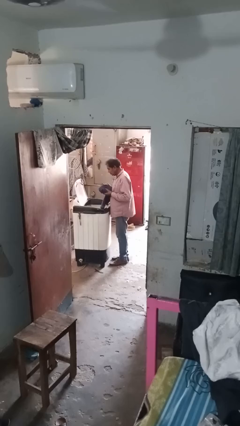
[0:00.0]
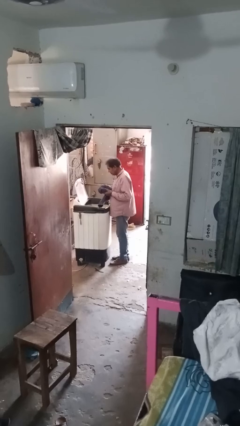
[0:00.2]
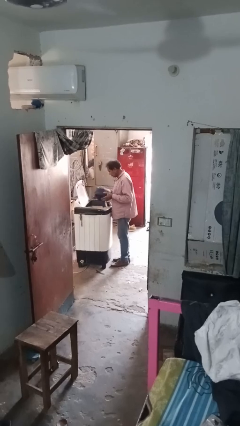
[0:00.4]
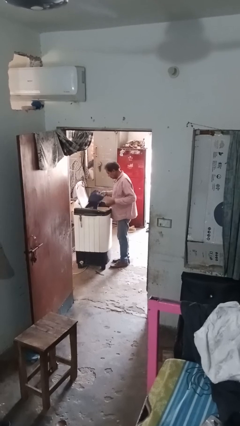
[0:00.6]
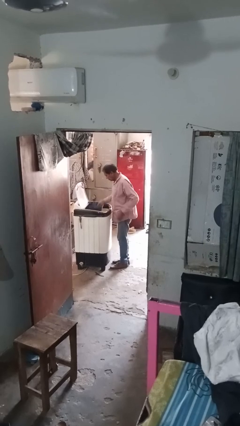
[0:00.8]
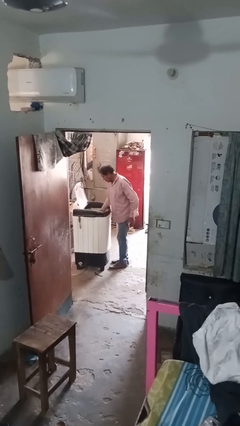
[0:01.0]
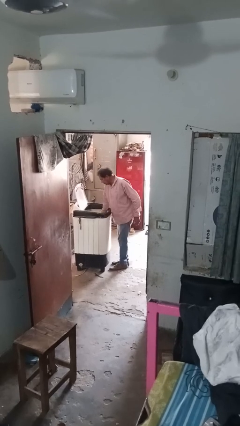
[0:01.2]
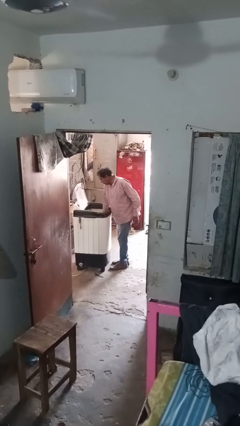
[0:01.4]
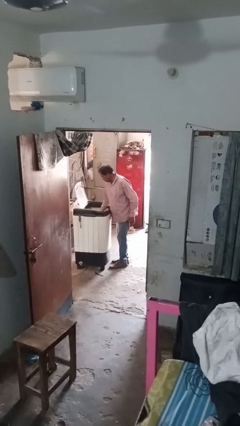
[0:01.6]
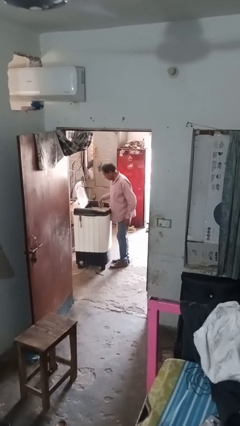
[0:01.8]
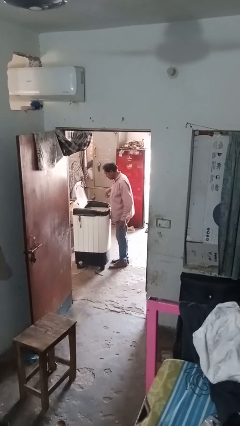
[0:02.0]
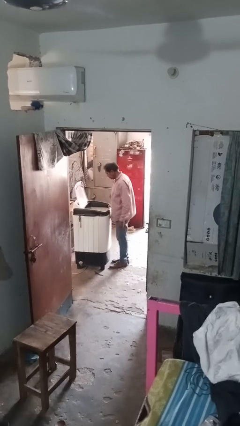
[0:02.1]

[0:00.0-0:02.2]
person loads clotheswasher

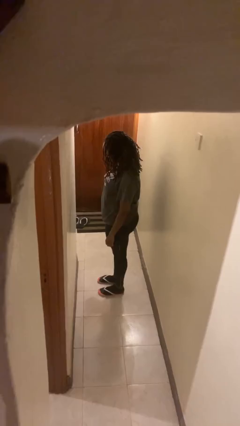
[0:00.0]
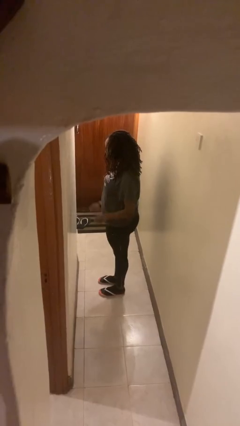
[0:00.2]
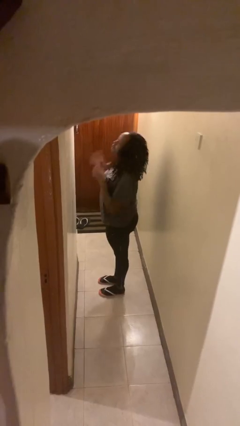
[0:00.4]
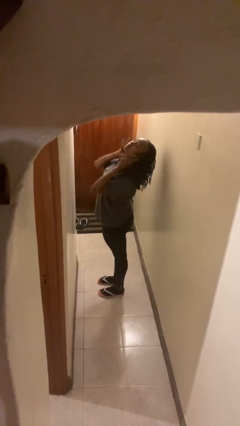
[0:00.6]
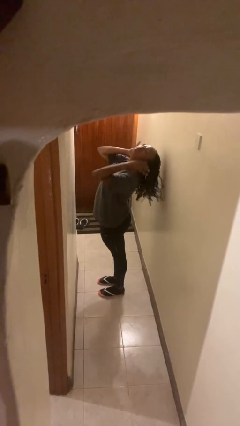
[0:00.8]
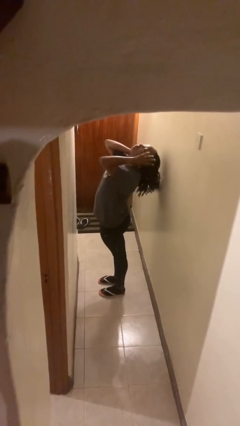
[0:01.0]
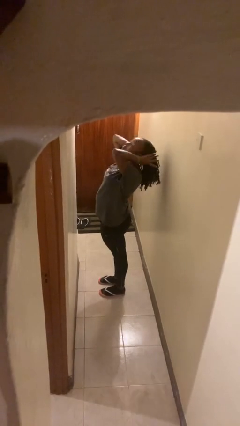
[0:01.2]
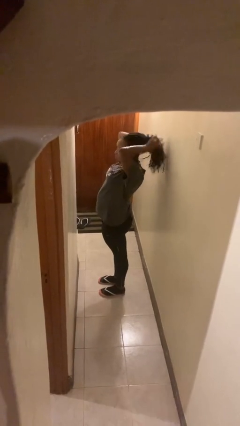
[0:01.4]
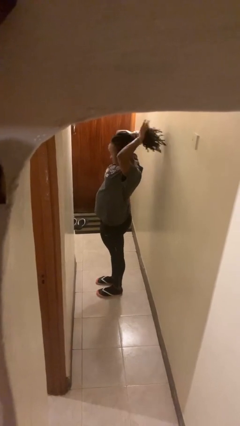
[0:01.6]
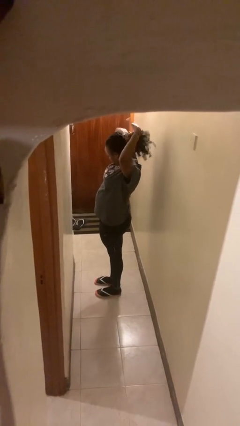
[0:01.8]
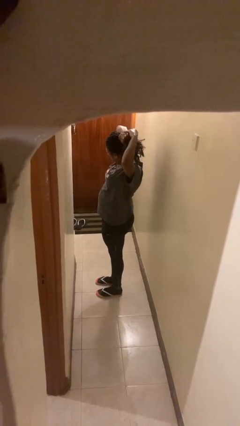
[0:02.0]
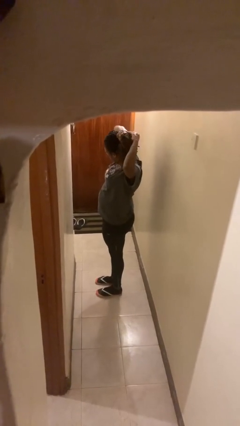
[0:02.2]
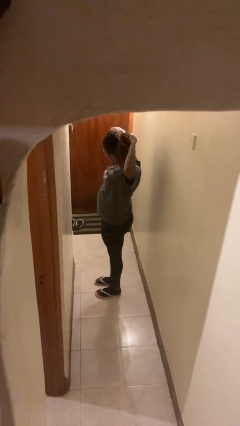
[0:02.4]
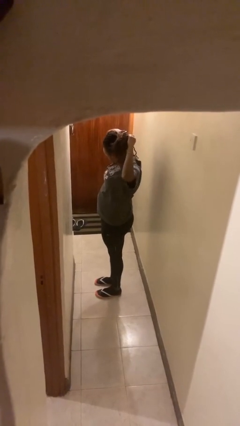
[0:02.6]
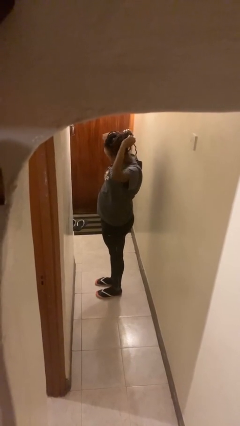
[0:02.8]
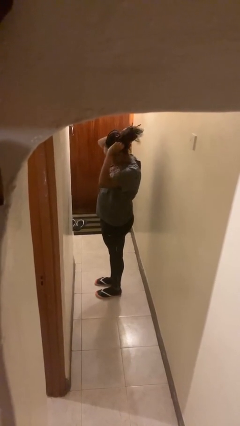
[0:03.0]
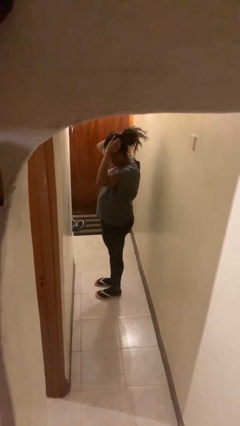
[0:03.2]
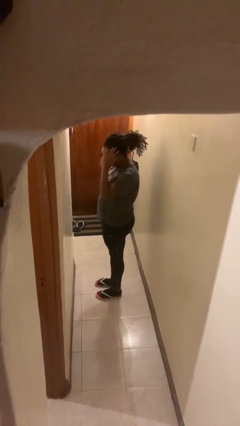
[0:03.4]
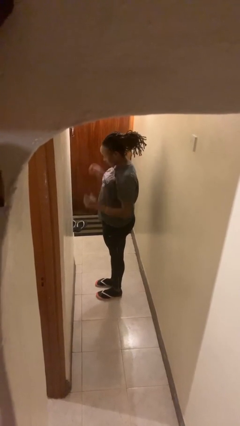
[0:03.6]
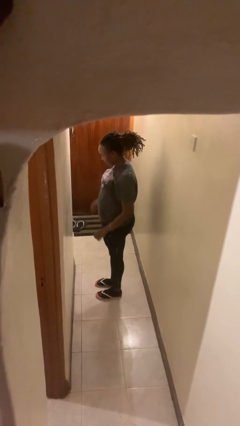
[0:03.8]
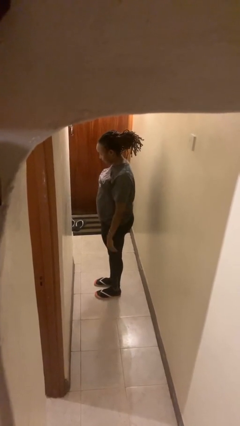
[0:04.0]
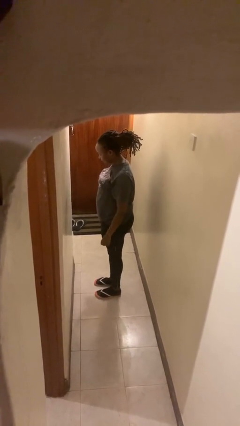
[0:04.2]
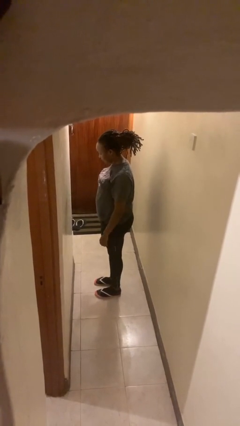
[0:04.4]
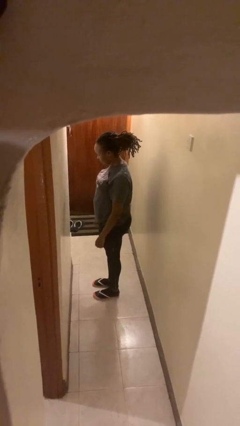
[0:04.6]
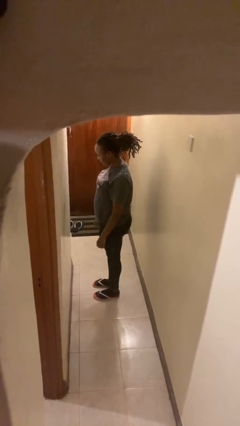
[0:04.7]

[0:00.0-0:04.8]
person puts hair in ponytail

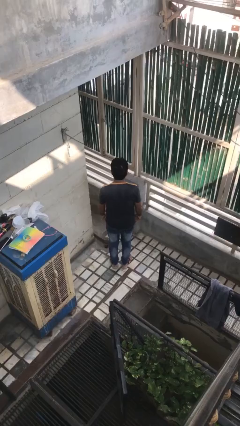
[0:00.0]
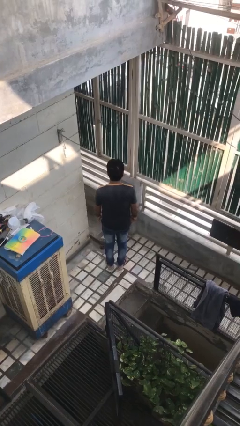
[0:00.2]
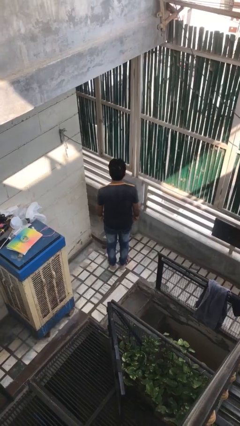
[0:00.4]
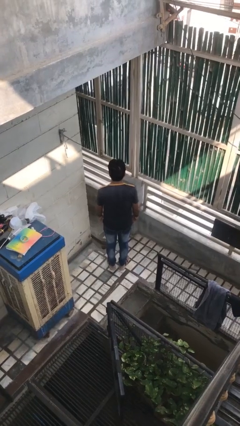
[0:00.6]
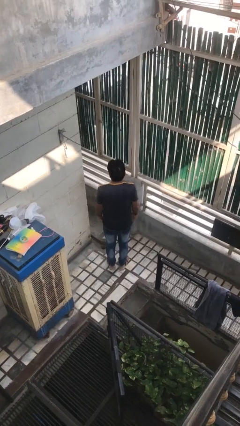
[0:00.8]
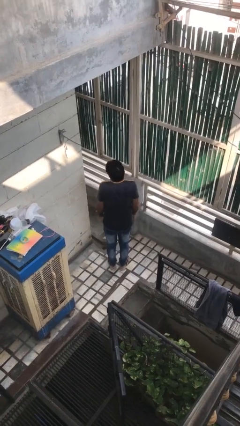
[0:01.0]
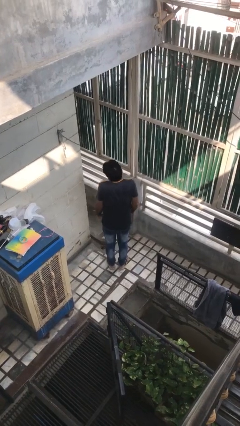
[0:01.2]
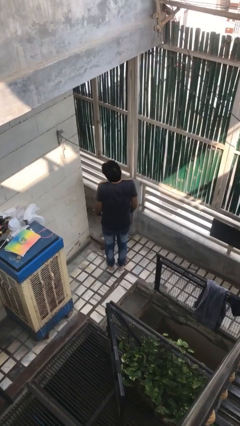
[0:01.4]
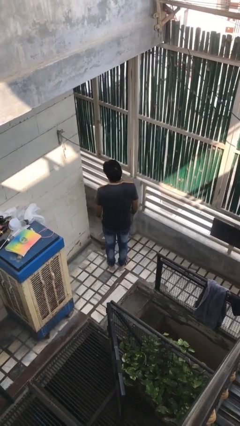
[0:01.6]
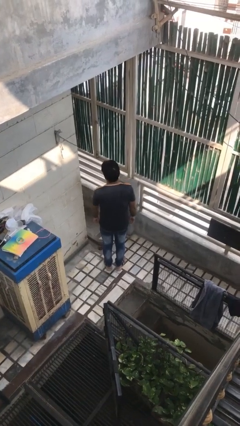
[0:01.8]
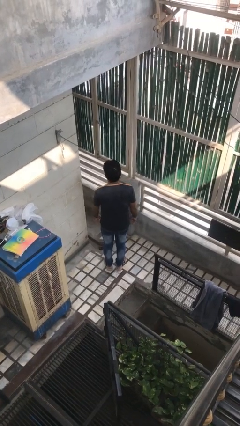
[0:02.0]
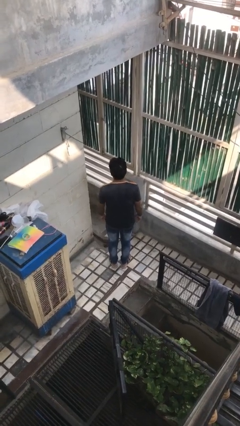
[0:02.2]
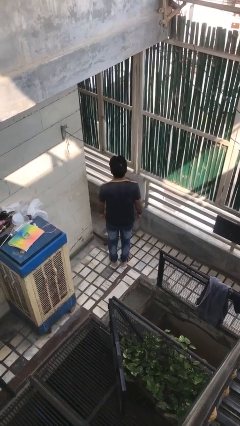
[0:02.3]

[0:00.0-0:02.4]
person shrugs

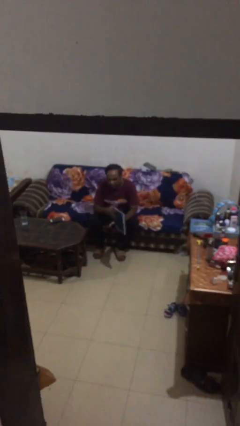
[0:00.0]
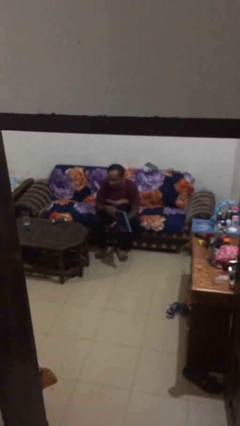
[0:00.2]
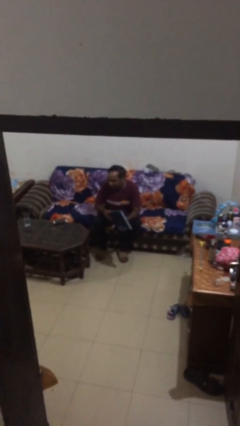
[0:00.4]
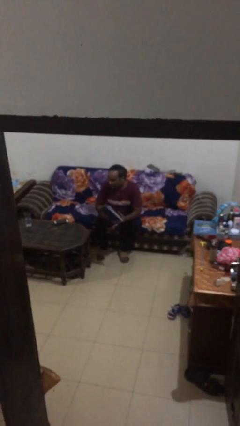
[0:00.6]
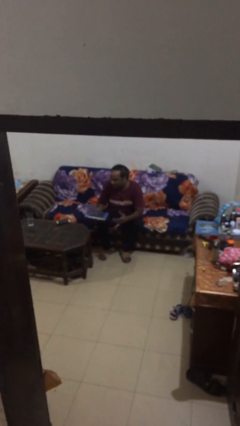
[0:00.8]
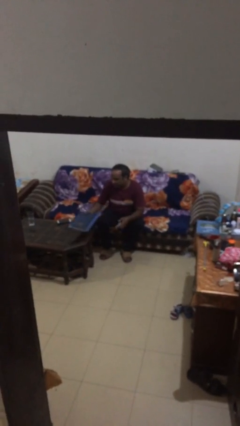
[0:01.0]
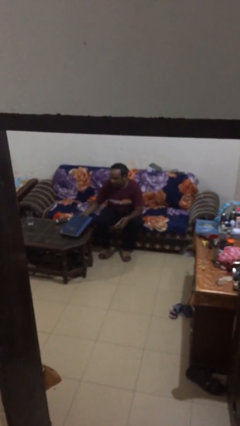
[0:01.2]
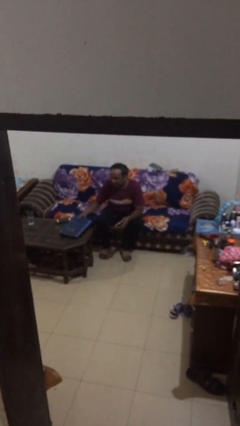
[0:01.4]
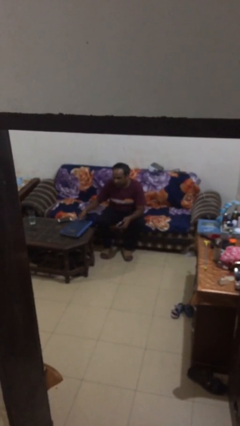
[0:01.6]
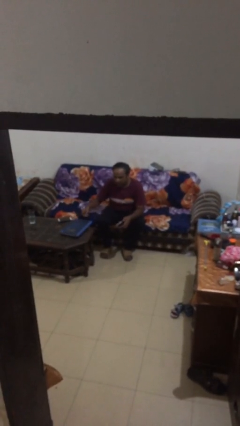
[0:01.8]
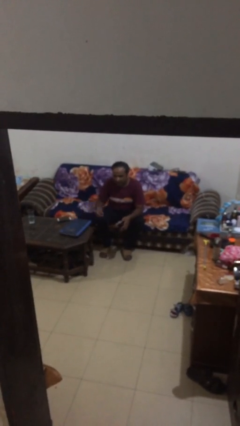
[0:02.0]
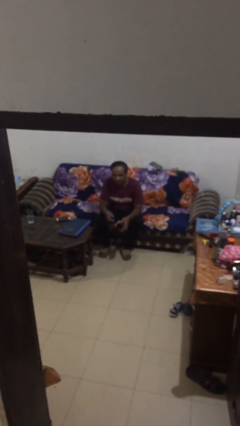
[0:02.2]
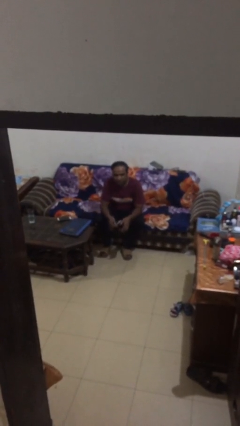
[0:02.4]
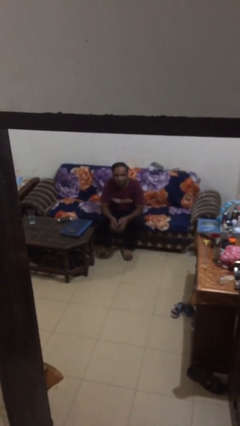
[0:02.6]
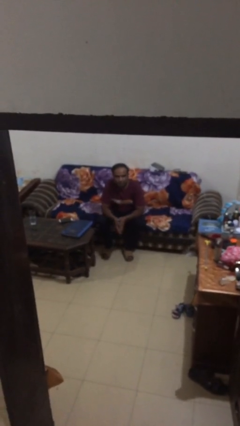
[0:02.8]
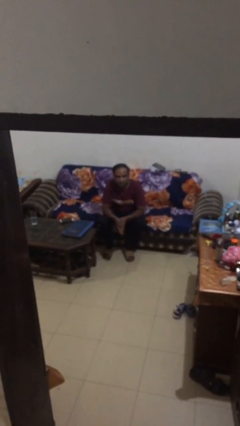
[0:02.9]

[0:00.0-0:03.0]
person puts down object on table

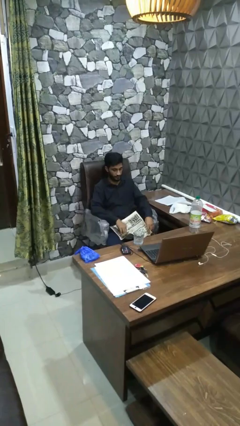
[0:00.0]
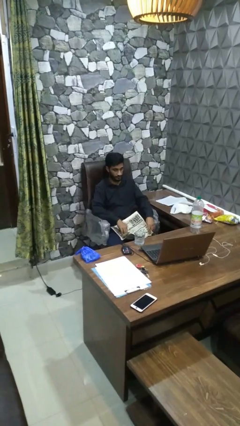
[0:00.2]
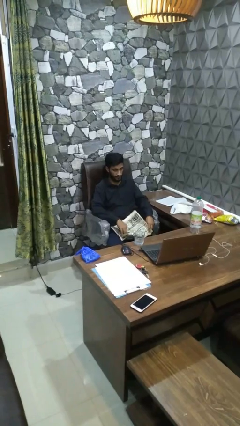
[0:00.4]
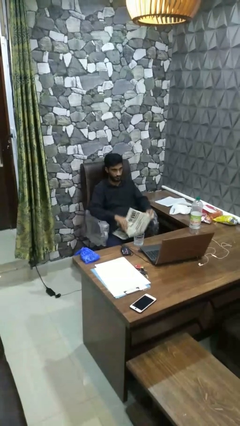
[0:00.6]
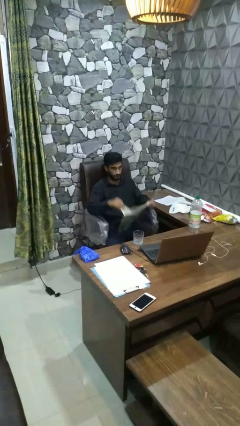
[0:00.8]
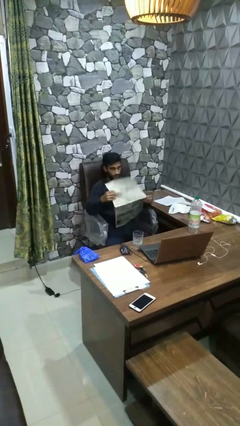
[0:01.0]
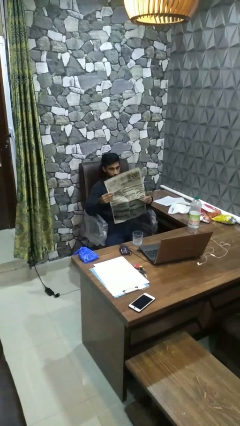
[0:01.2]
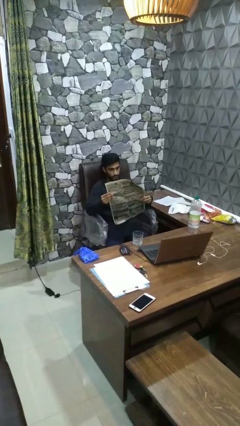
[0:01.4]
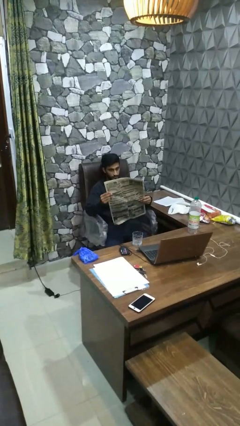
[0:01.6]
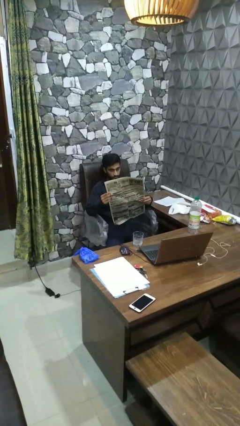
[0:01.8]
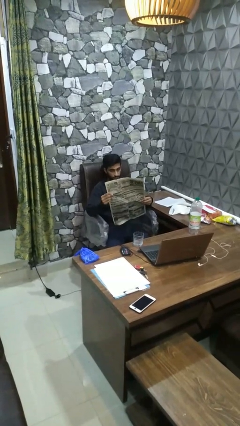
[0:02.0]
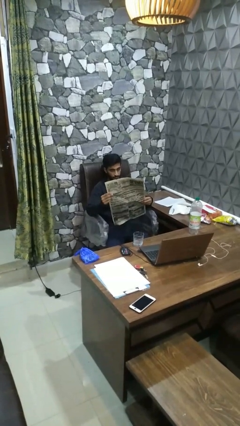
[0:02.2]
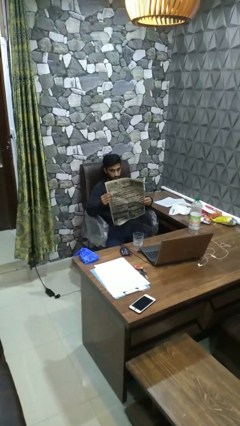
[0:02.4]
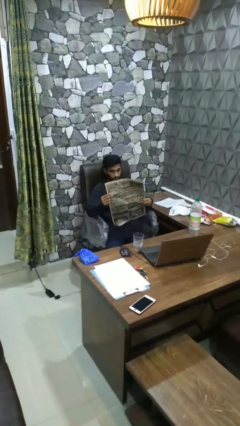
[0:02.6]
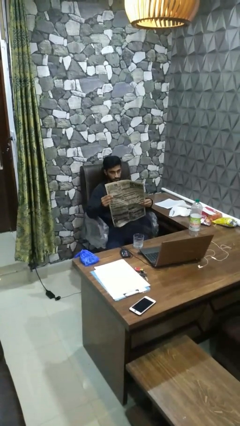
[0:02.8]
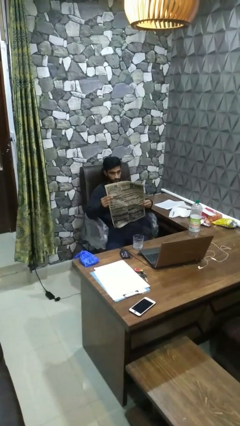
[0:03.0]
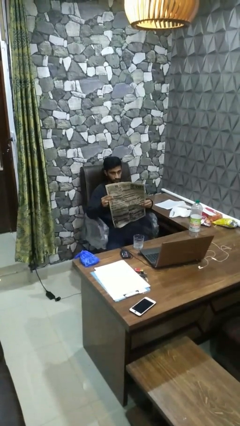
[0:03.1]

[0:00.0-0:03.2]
person reads newspaper

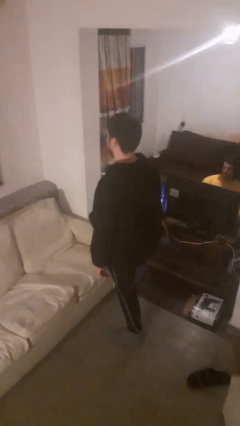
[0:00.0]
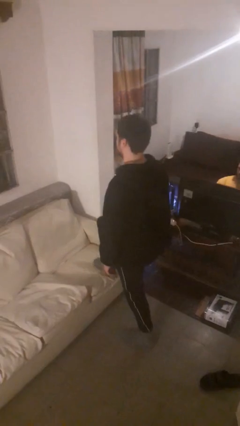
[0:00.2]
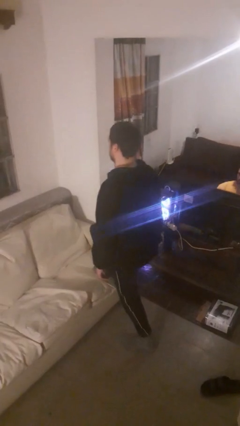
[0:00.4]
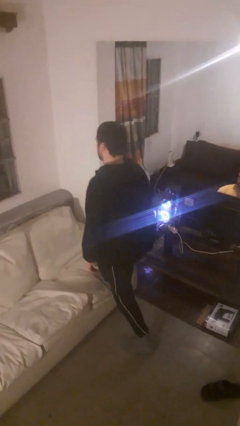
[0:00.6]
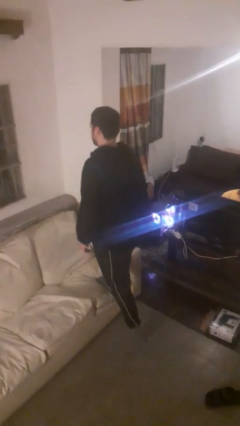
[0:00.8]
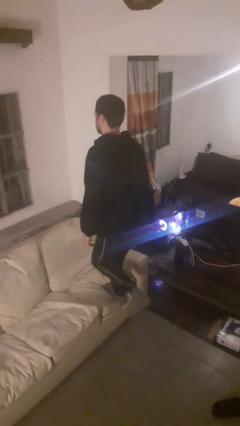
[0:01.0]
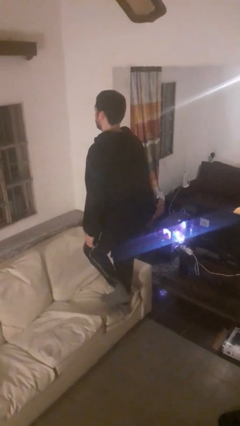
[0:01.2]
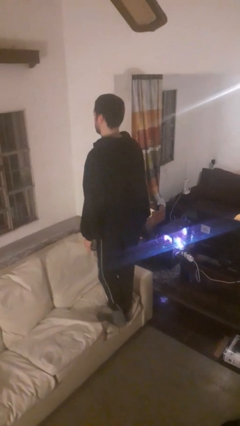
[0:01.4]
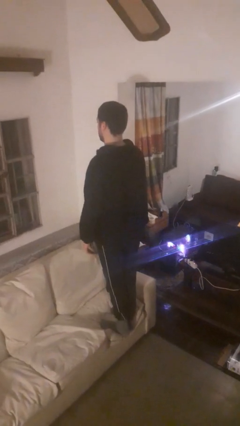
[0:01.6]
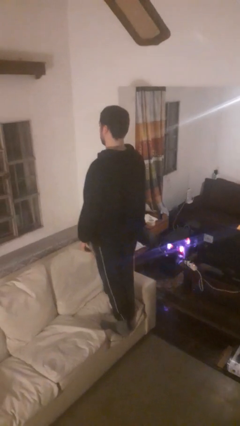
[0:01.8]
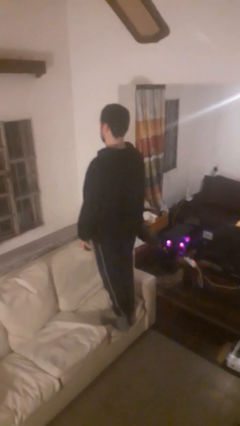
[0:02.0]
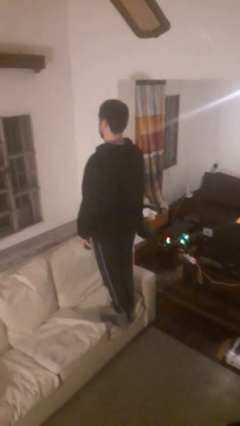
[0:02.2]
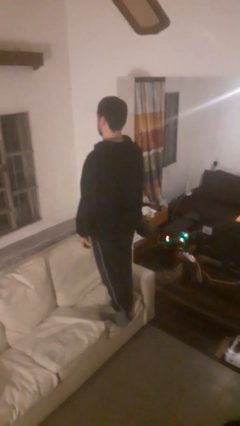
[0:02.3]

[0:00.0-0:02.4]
person climbs on couch
